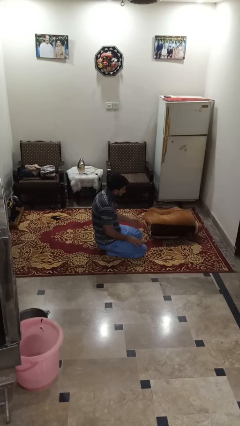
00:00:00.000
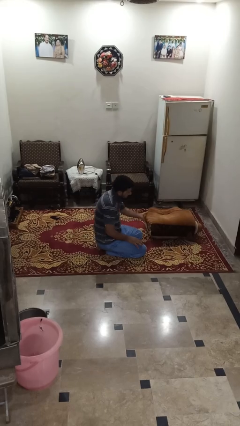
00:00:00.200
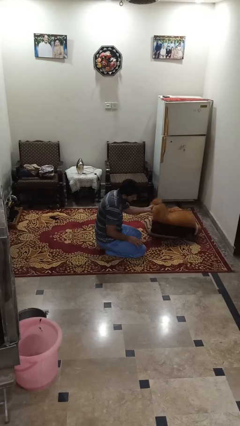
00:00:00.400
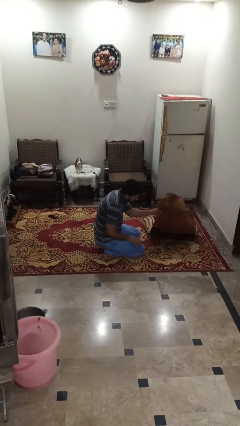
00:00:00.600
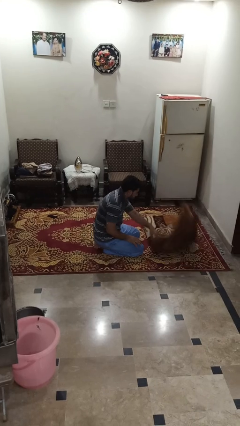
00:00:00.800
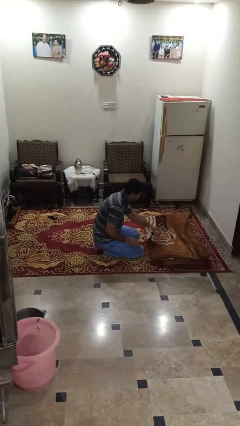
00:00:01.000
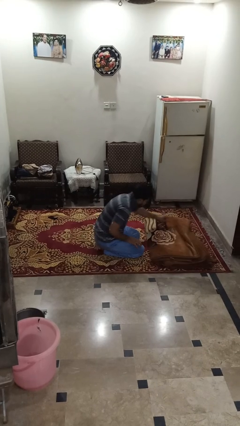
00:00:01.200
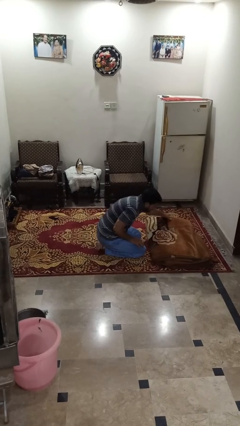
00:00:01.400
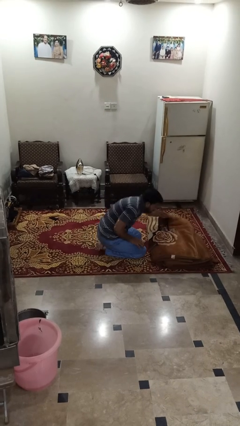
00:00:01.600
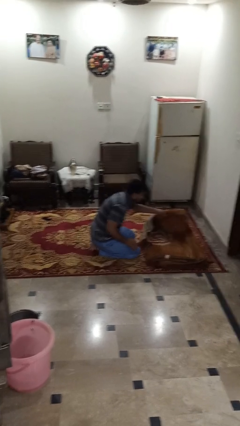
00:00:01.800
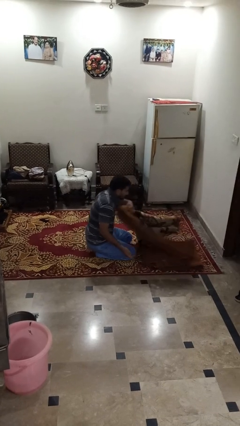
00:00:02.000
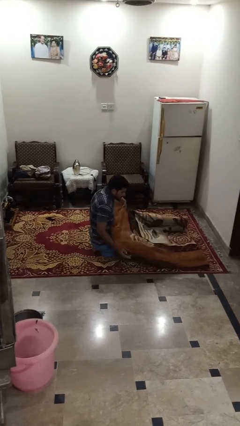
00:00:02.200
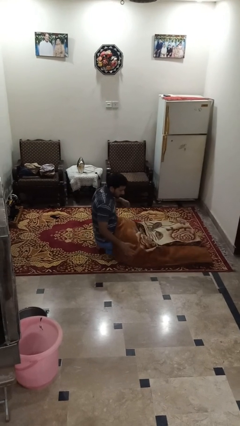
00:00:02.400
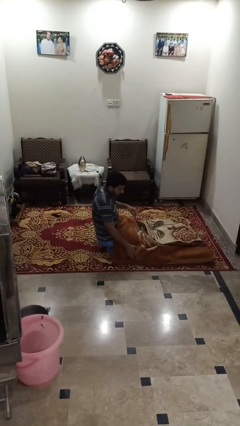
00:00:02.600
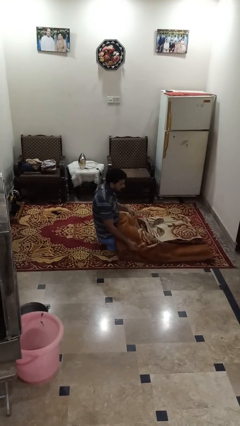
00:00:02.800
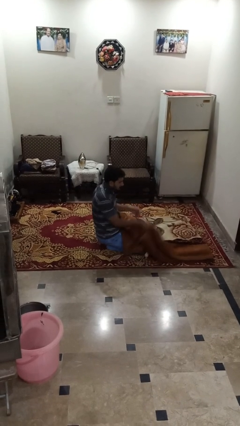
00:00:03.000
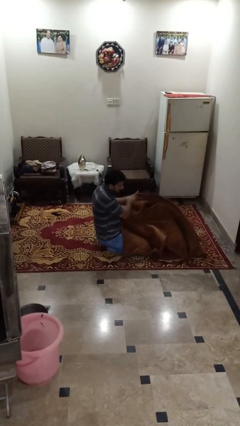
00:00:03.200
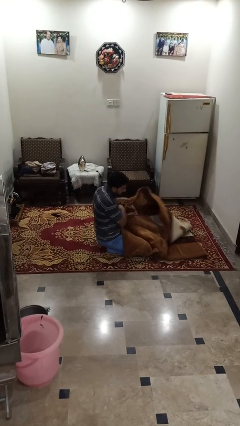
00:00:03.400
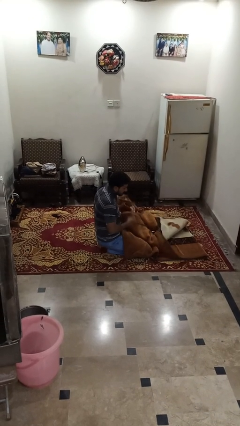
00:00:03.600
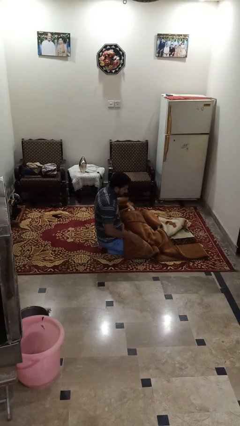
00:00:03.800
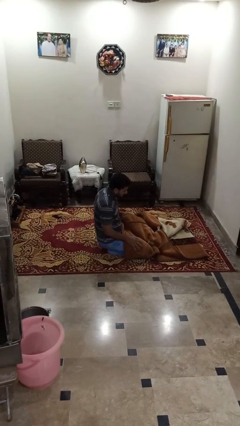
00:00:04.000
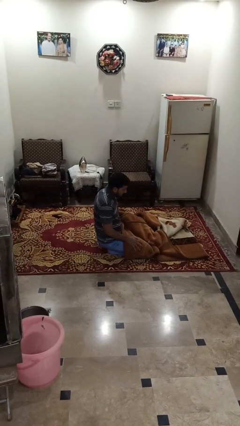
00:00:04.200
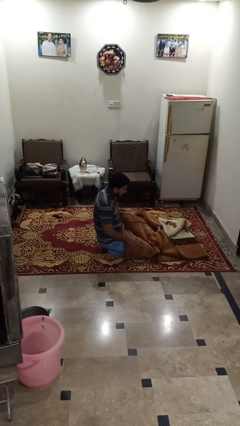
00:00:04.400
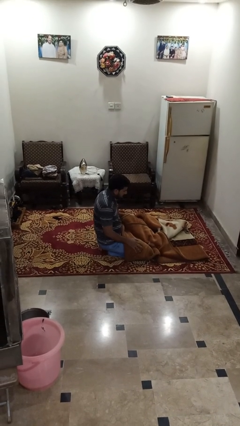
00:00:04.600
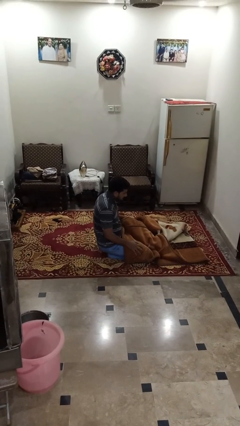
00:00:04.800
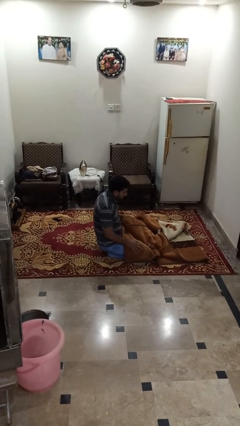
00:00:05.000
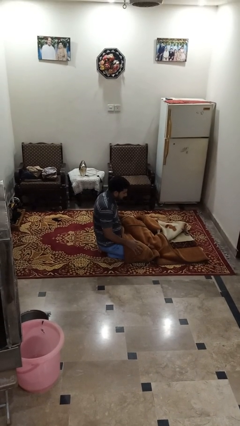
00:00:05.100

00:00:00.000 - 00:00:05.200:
person unfolds blanket

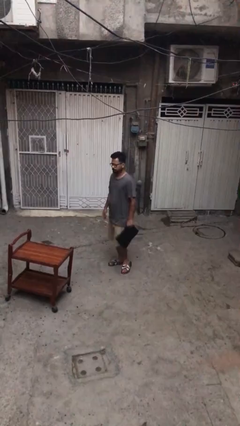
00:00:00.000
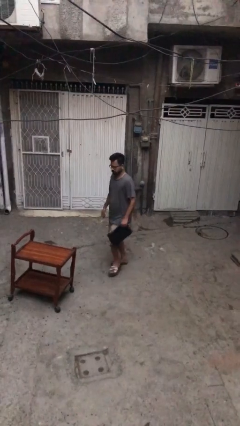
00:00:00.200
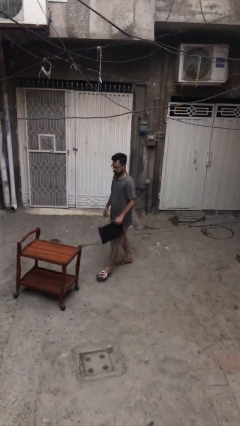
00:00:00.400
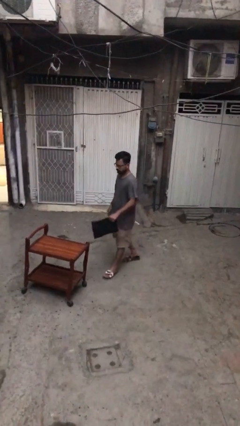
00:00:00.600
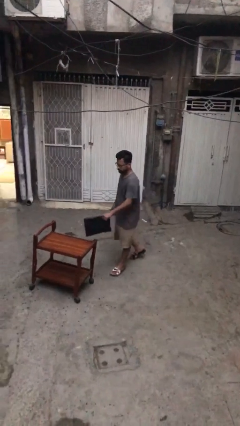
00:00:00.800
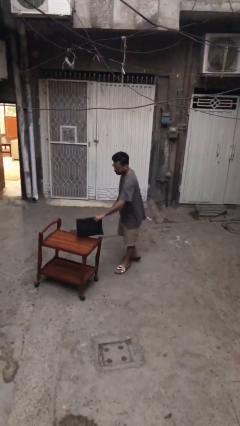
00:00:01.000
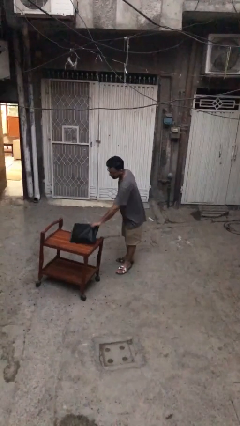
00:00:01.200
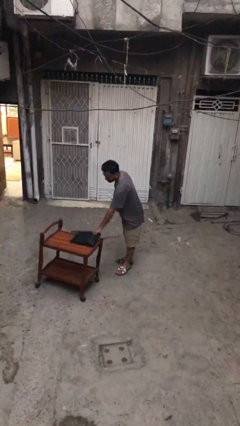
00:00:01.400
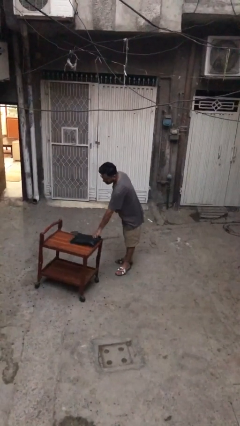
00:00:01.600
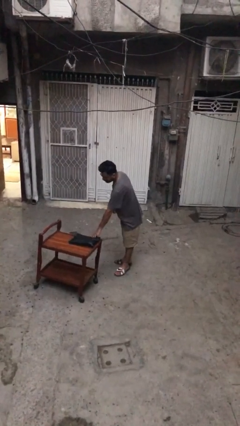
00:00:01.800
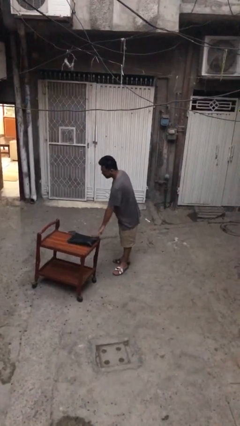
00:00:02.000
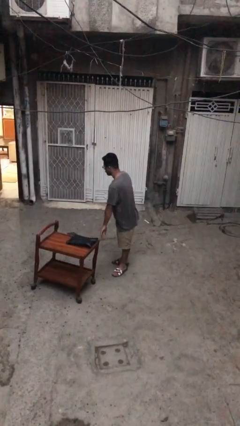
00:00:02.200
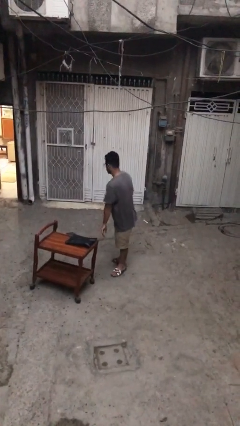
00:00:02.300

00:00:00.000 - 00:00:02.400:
person puts down object on table

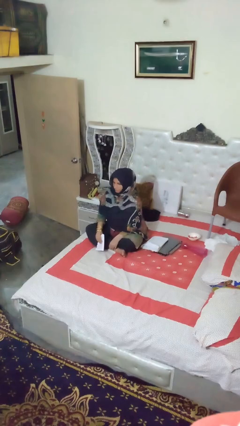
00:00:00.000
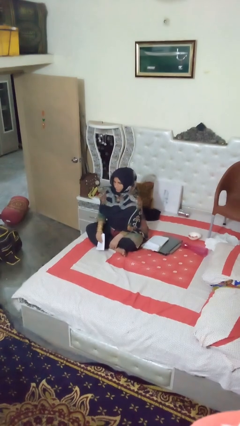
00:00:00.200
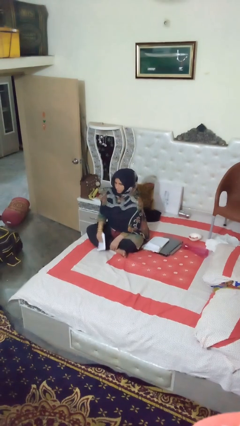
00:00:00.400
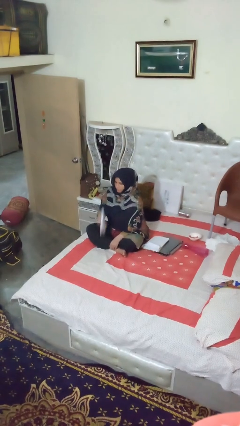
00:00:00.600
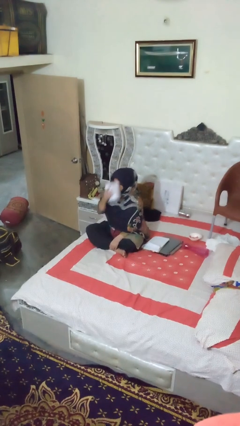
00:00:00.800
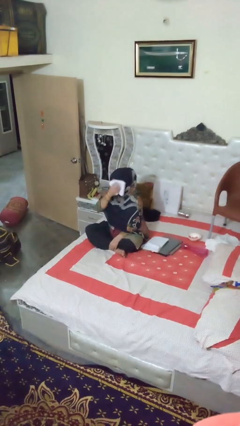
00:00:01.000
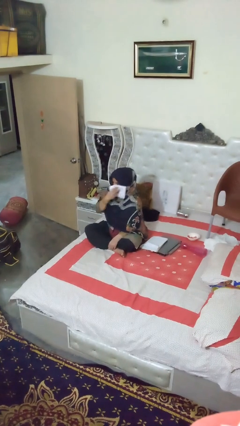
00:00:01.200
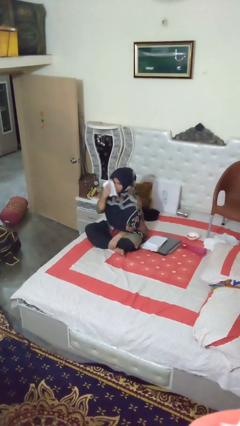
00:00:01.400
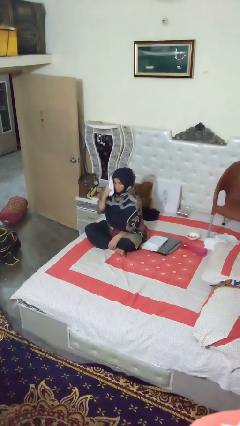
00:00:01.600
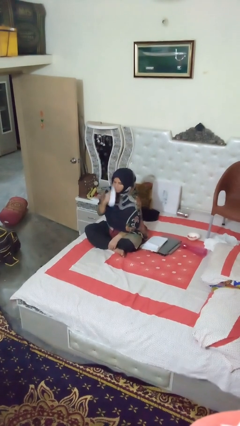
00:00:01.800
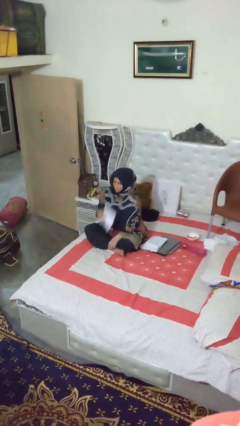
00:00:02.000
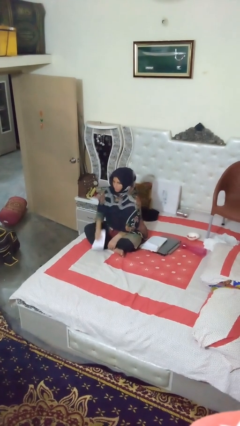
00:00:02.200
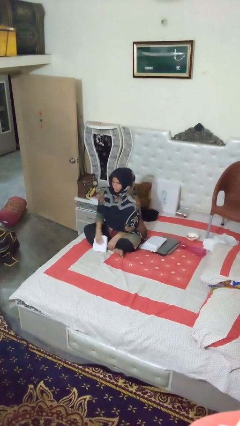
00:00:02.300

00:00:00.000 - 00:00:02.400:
person wipes mouth with napkin

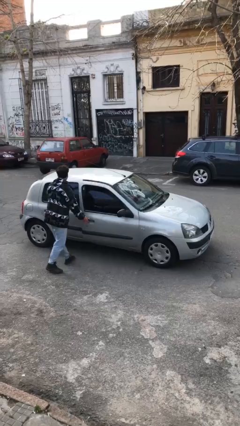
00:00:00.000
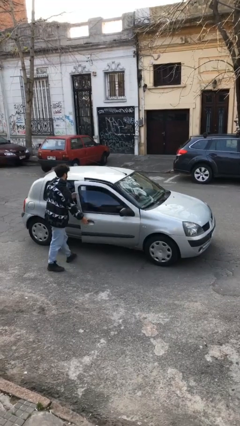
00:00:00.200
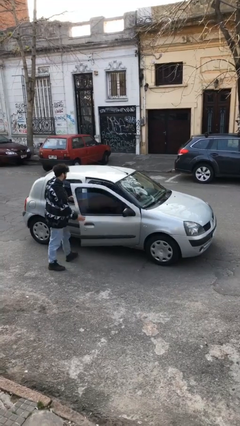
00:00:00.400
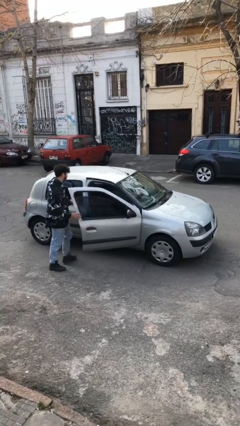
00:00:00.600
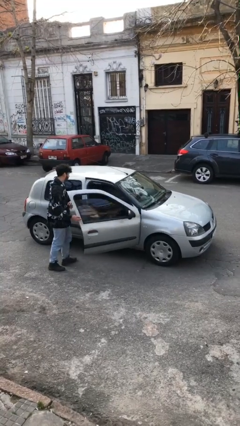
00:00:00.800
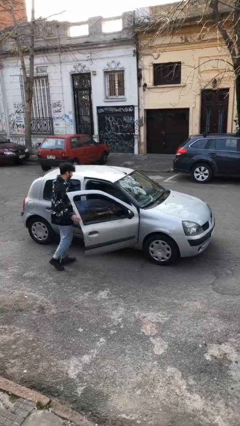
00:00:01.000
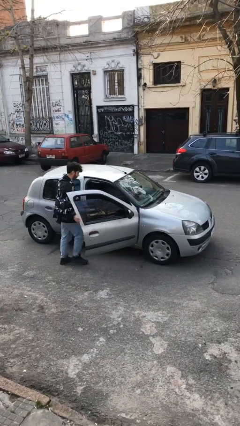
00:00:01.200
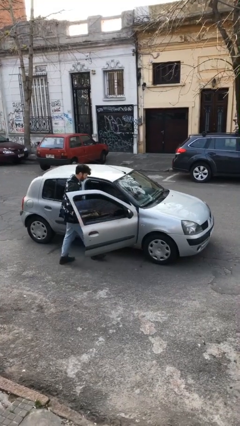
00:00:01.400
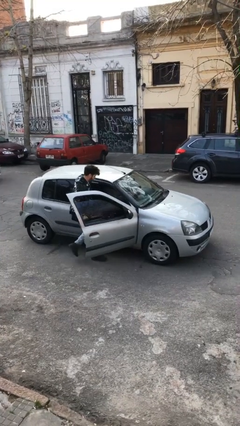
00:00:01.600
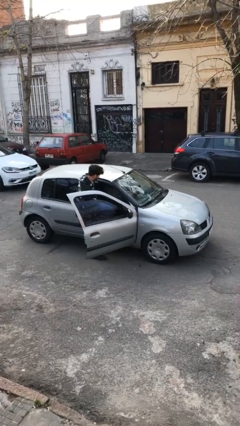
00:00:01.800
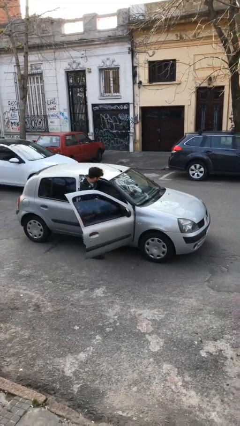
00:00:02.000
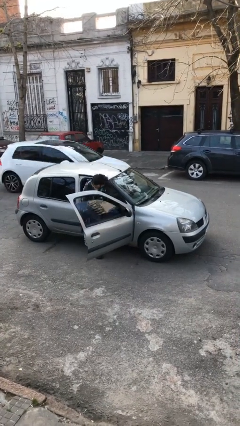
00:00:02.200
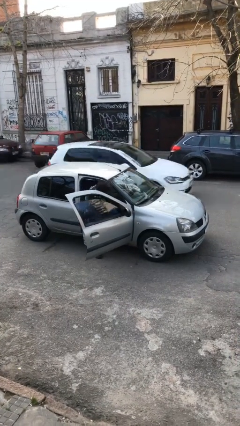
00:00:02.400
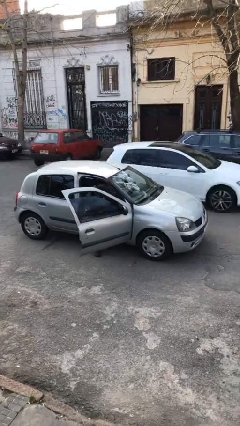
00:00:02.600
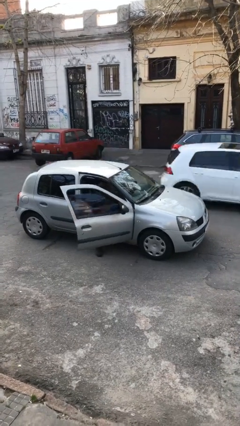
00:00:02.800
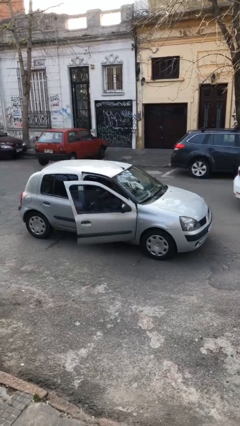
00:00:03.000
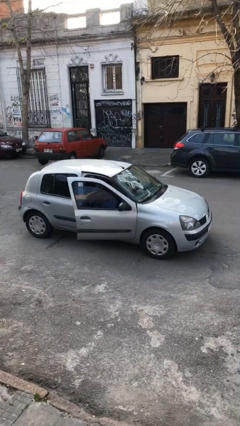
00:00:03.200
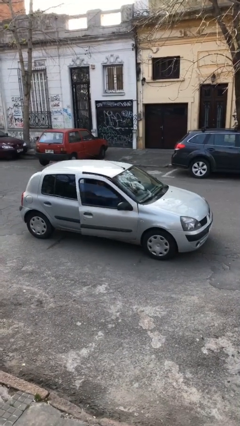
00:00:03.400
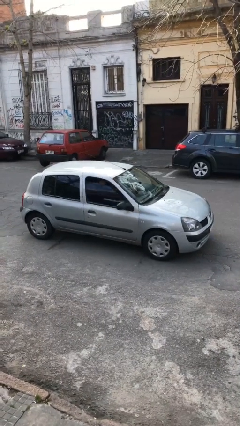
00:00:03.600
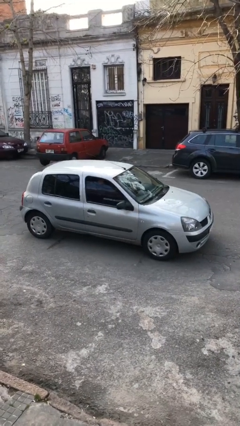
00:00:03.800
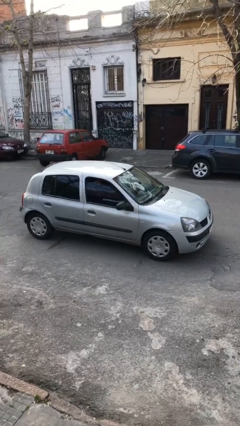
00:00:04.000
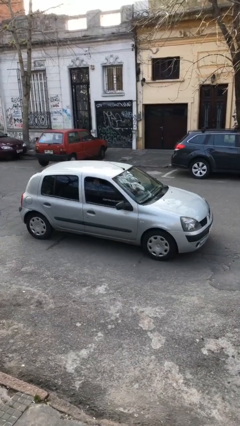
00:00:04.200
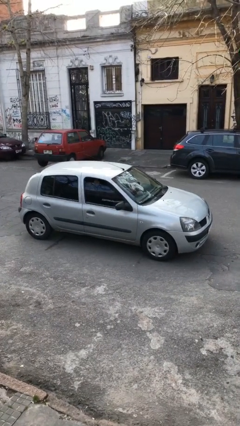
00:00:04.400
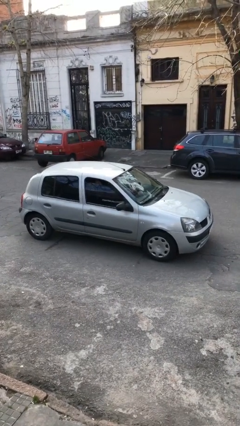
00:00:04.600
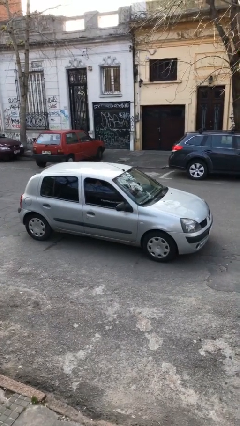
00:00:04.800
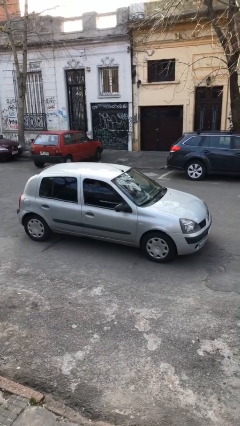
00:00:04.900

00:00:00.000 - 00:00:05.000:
car picks up person

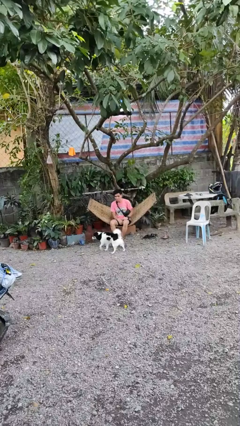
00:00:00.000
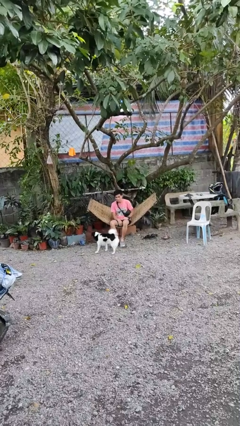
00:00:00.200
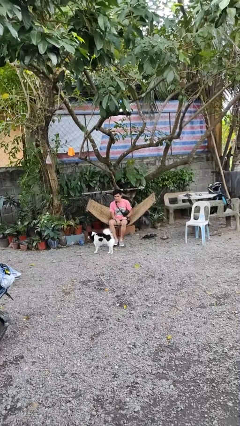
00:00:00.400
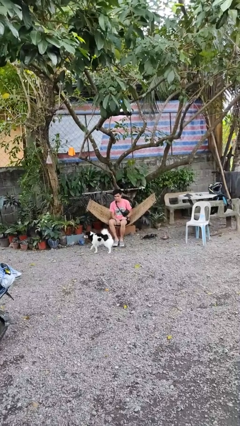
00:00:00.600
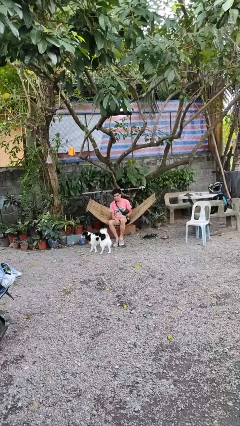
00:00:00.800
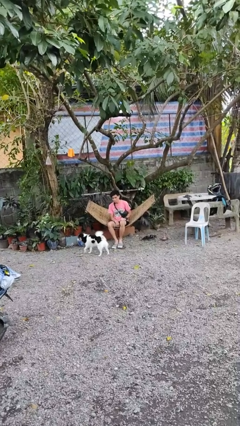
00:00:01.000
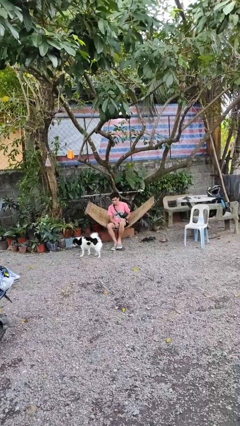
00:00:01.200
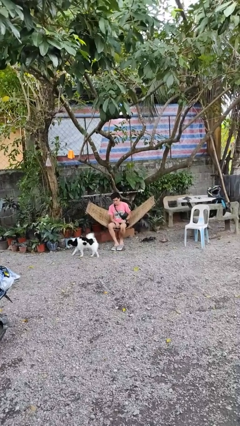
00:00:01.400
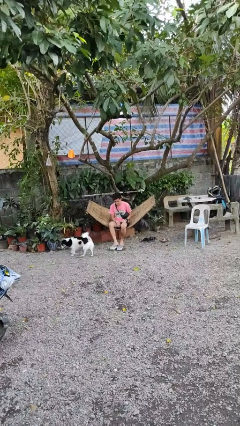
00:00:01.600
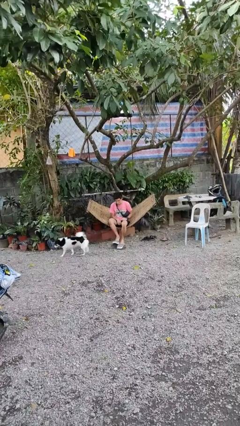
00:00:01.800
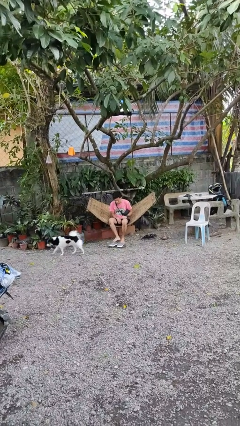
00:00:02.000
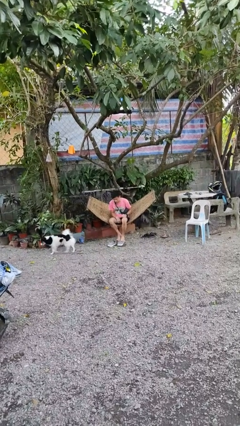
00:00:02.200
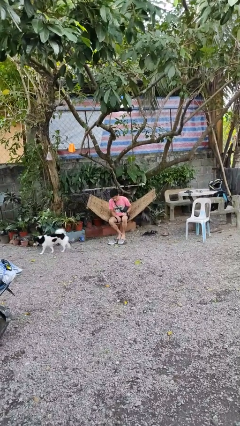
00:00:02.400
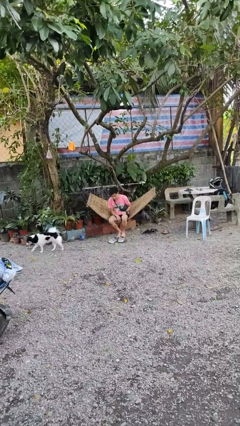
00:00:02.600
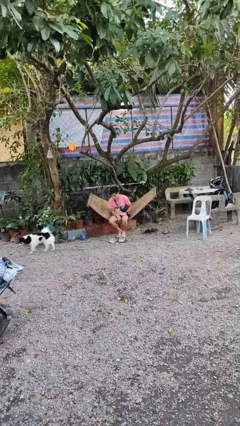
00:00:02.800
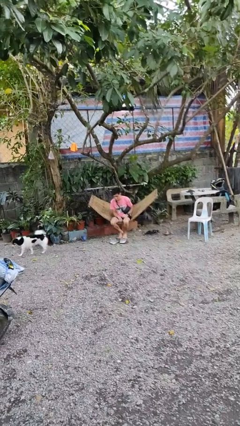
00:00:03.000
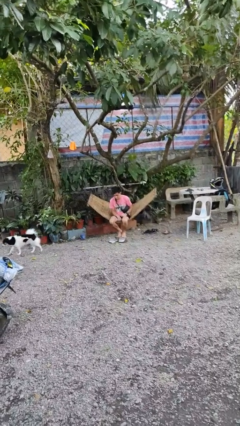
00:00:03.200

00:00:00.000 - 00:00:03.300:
person takes off shoes
